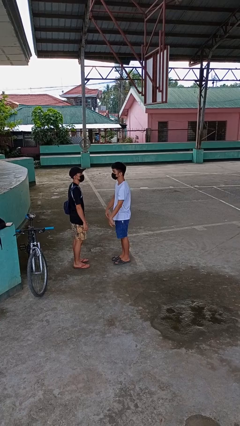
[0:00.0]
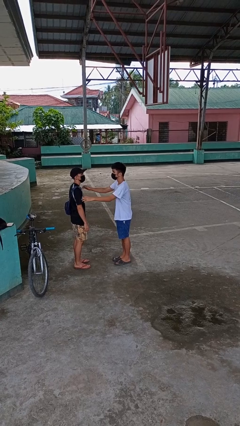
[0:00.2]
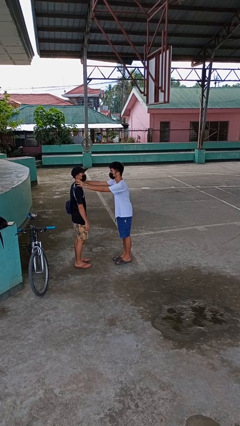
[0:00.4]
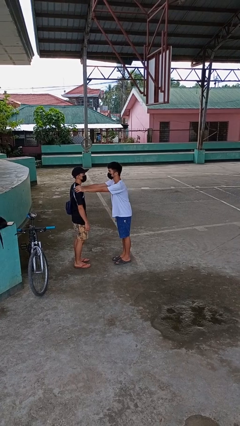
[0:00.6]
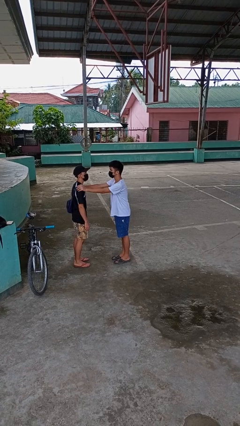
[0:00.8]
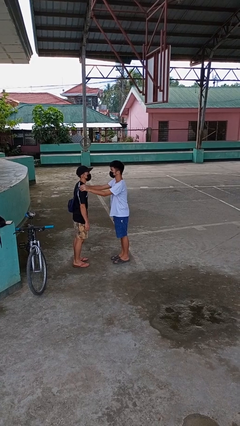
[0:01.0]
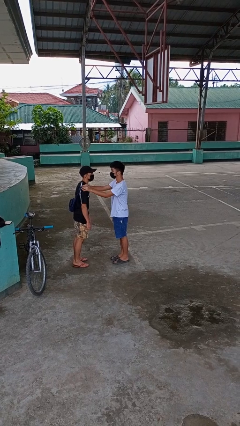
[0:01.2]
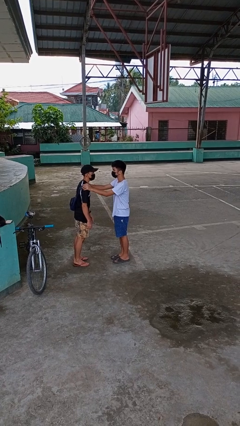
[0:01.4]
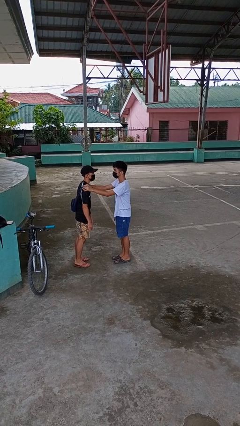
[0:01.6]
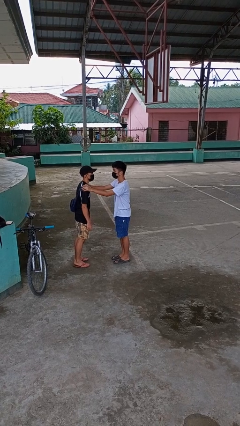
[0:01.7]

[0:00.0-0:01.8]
person grabs person by shoulder

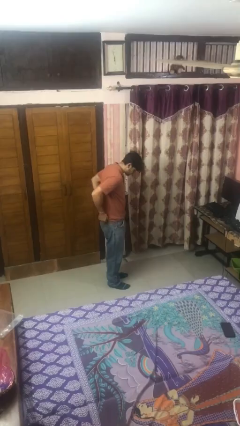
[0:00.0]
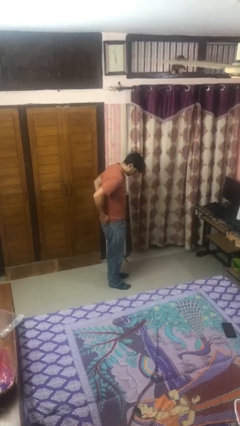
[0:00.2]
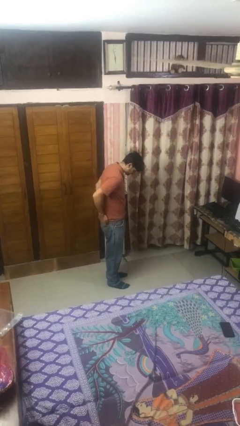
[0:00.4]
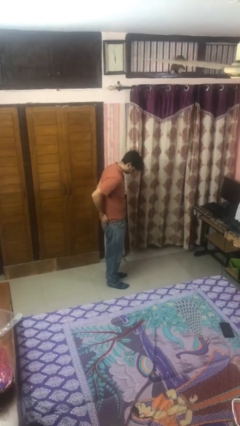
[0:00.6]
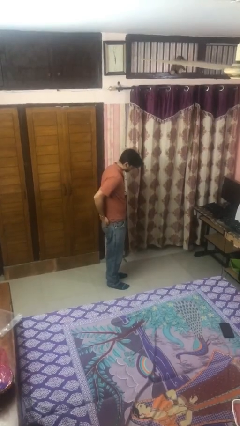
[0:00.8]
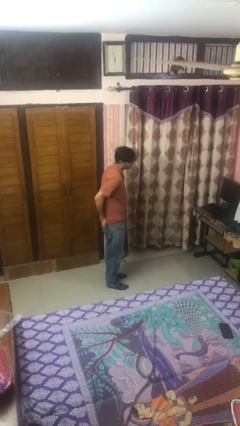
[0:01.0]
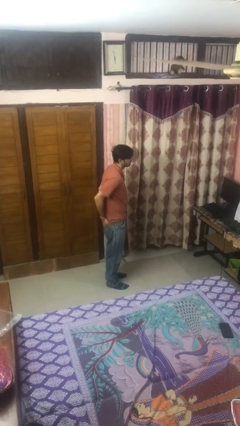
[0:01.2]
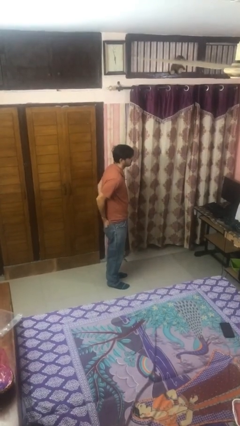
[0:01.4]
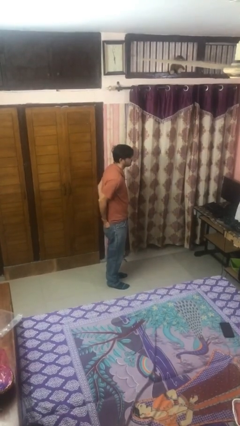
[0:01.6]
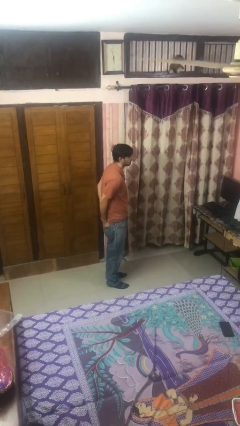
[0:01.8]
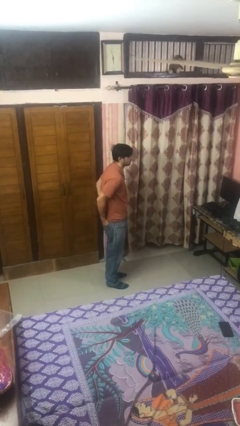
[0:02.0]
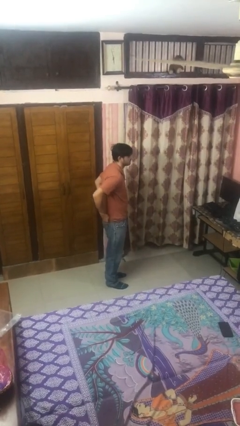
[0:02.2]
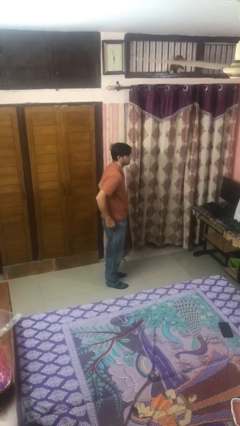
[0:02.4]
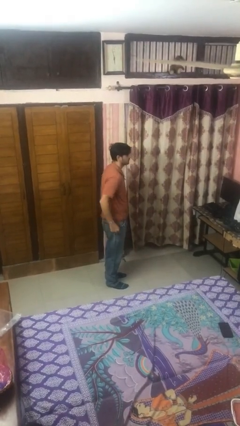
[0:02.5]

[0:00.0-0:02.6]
person puts hands in back pockets

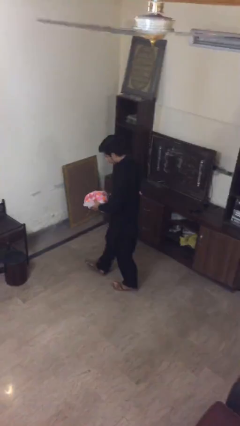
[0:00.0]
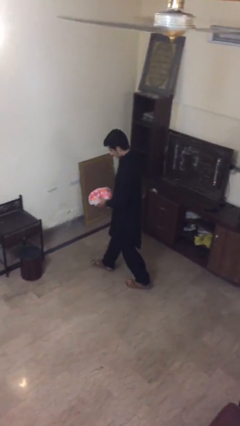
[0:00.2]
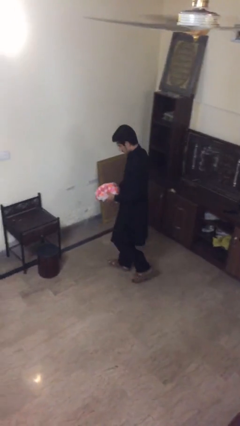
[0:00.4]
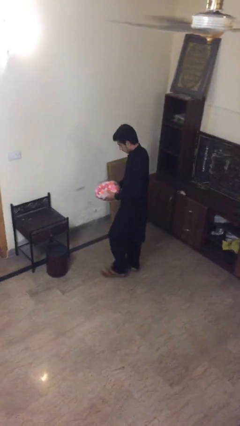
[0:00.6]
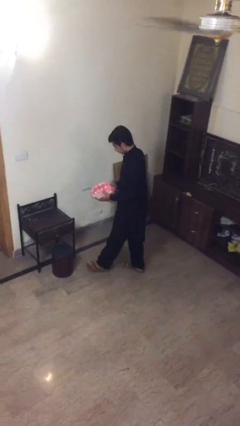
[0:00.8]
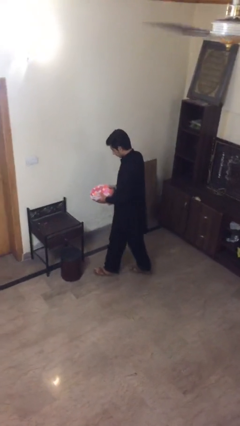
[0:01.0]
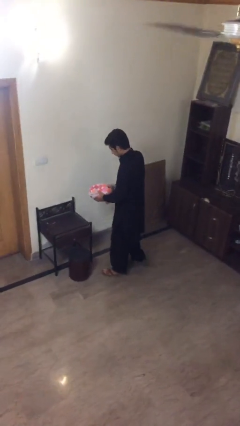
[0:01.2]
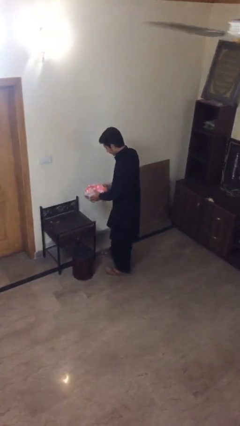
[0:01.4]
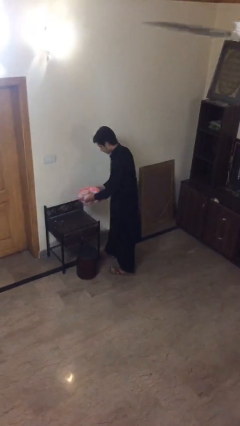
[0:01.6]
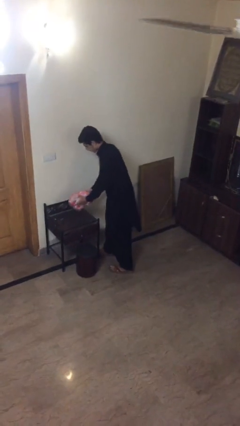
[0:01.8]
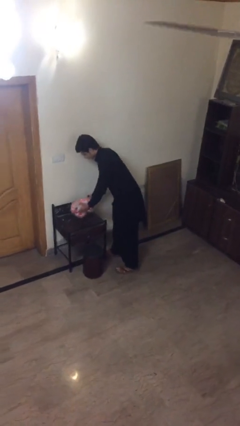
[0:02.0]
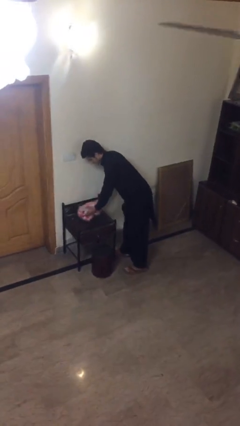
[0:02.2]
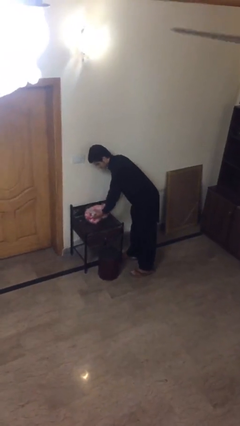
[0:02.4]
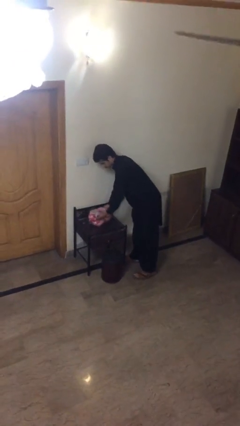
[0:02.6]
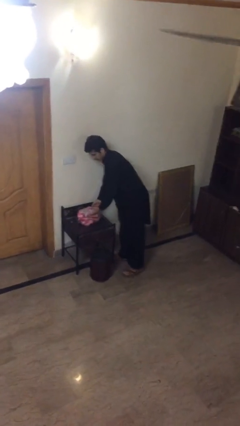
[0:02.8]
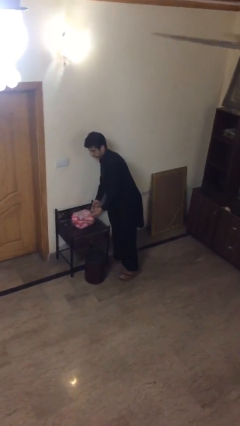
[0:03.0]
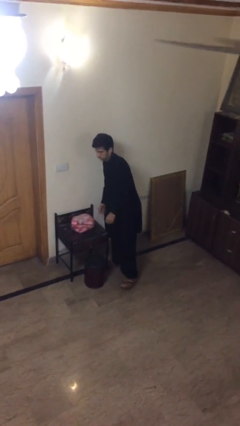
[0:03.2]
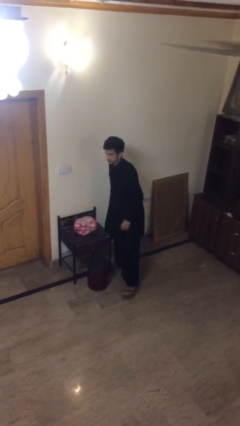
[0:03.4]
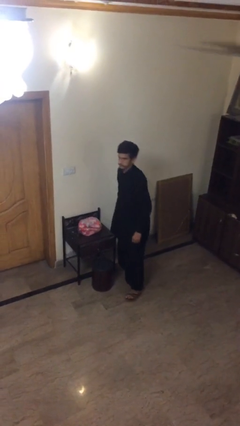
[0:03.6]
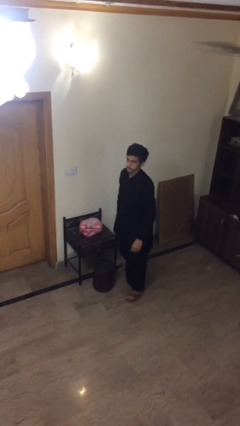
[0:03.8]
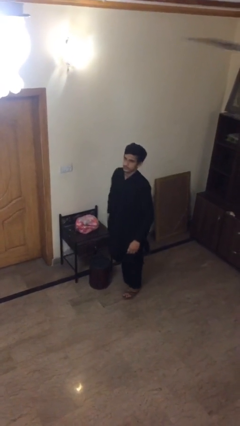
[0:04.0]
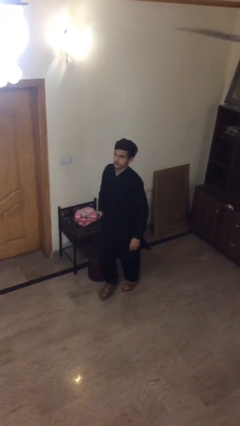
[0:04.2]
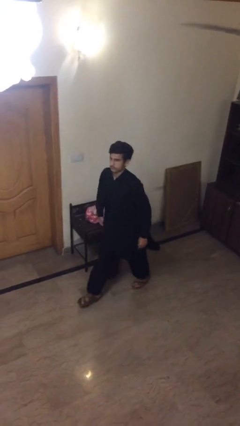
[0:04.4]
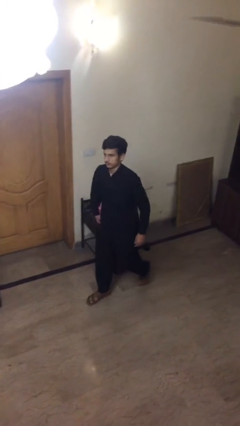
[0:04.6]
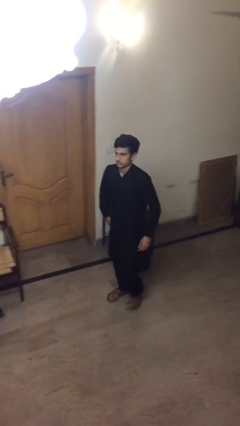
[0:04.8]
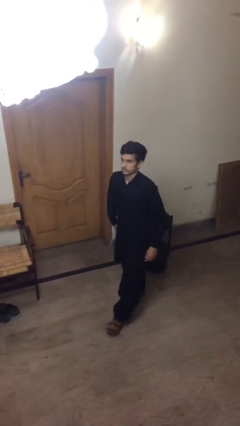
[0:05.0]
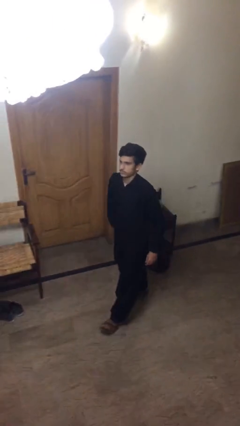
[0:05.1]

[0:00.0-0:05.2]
person puts down object on table

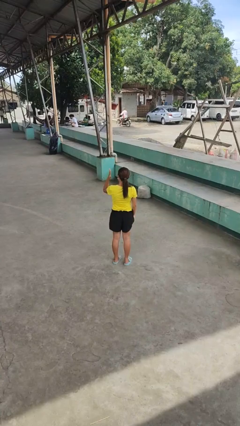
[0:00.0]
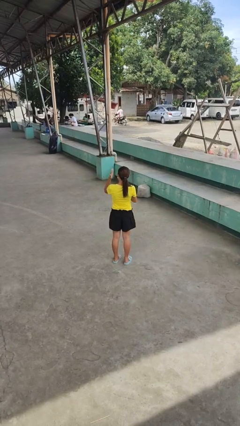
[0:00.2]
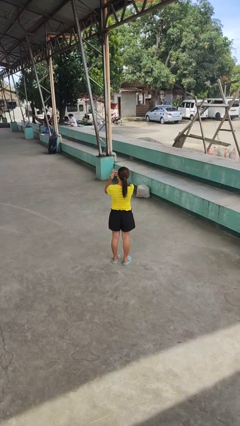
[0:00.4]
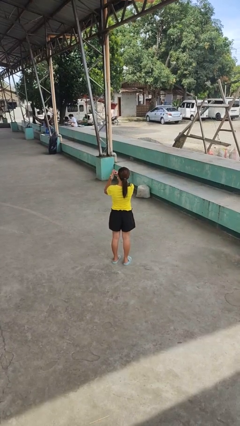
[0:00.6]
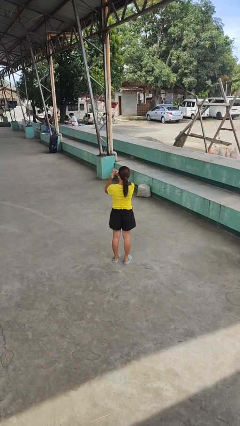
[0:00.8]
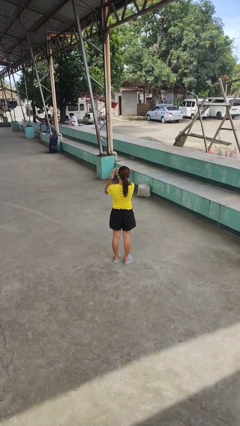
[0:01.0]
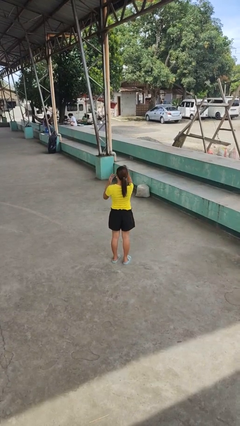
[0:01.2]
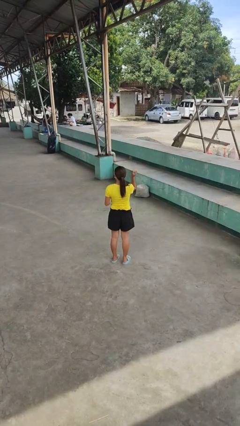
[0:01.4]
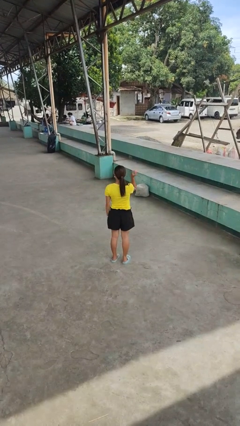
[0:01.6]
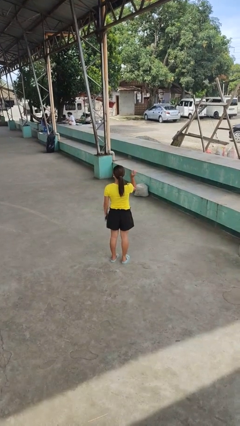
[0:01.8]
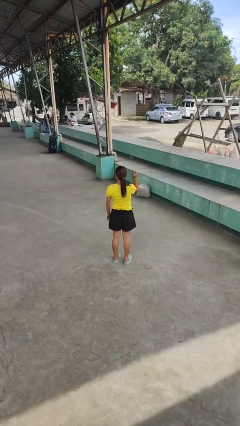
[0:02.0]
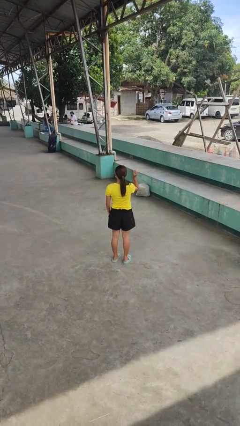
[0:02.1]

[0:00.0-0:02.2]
person takes off ring

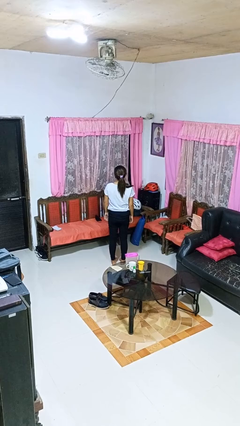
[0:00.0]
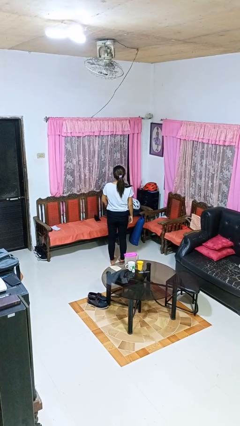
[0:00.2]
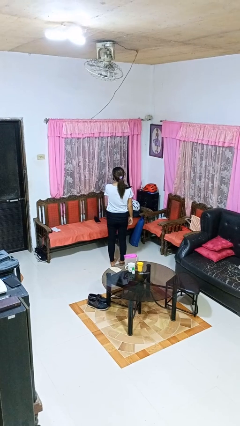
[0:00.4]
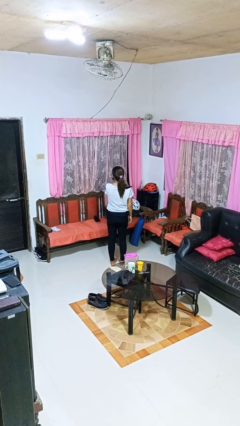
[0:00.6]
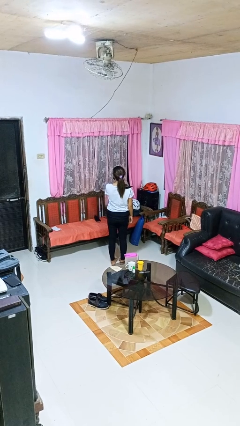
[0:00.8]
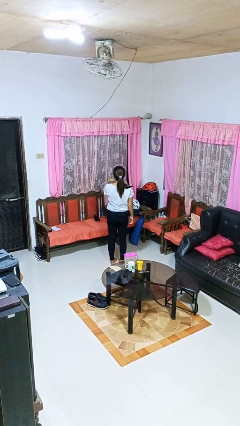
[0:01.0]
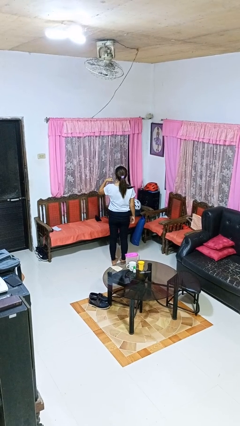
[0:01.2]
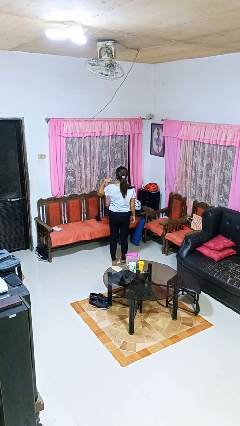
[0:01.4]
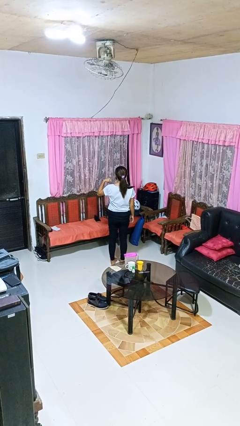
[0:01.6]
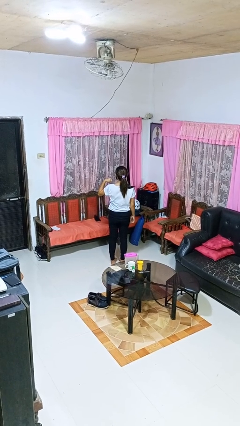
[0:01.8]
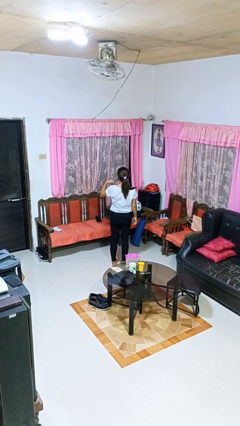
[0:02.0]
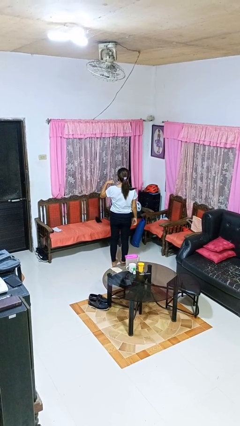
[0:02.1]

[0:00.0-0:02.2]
person gestures cut

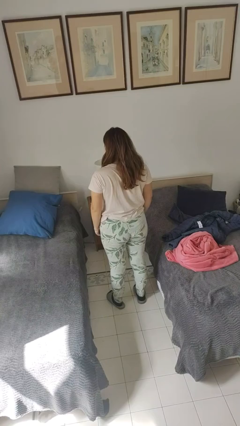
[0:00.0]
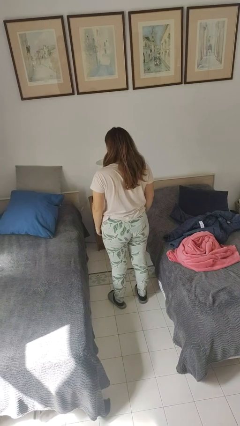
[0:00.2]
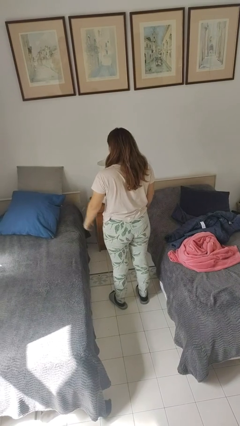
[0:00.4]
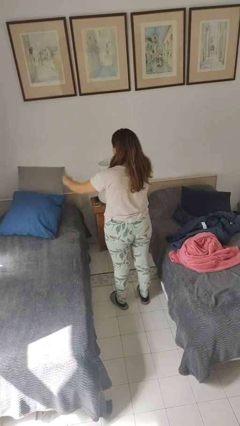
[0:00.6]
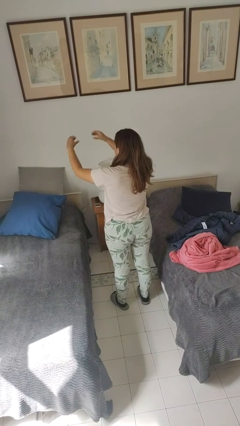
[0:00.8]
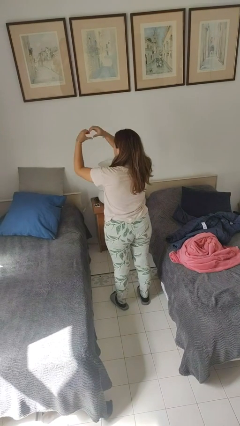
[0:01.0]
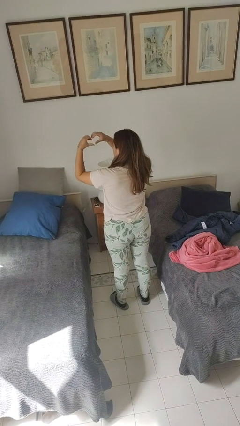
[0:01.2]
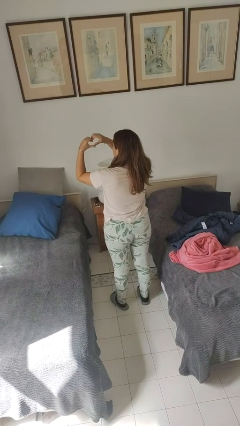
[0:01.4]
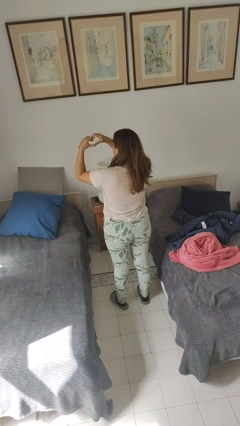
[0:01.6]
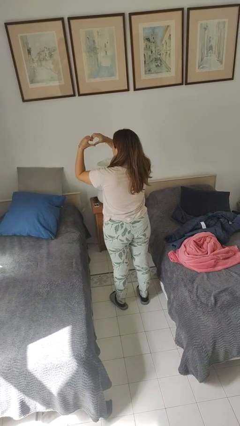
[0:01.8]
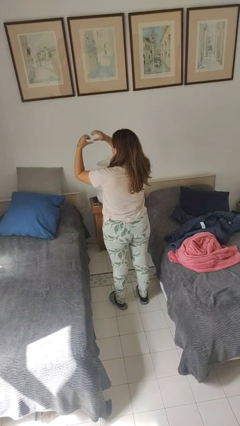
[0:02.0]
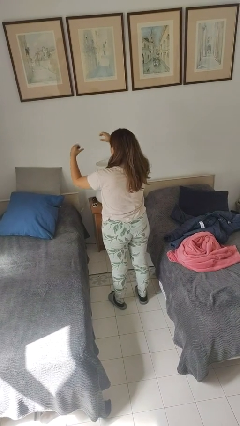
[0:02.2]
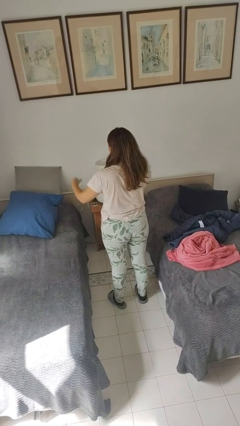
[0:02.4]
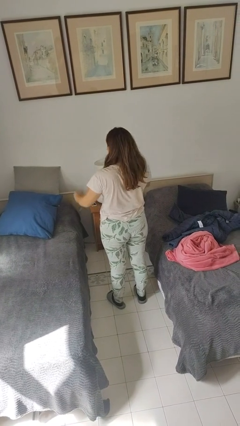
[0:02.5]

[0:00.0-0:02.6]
person gestures heart

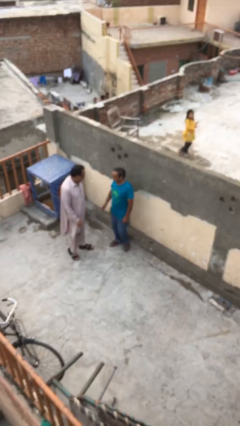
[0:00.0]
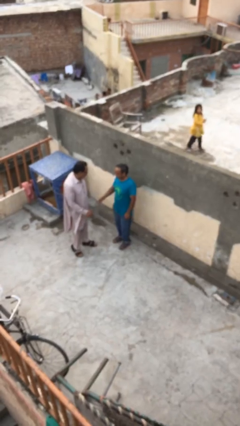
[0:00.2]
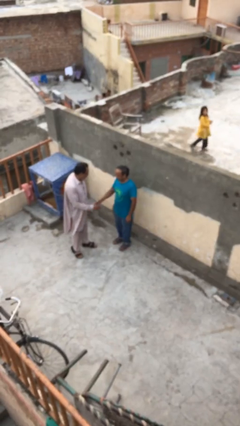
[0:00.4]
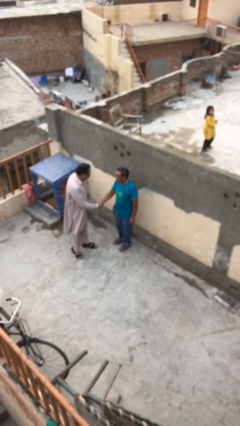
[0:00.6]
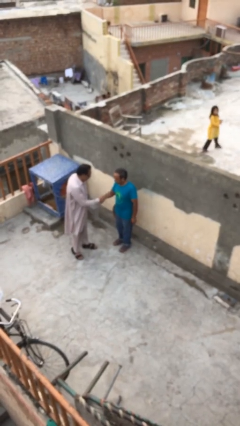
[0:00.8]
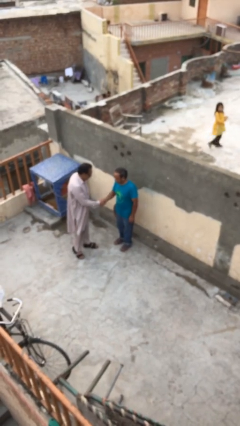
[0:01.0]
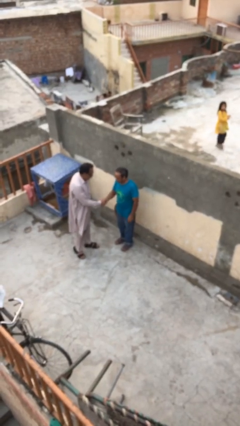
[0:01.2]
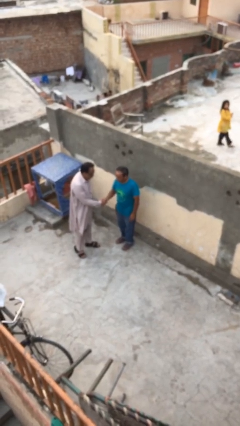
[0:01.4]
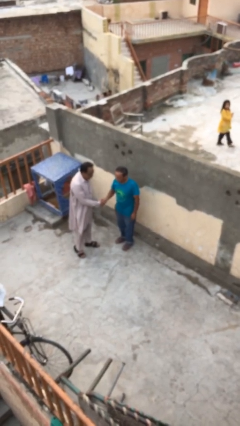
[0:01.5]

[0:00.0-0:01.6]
person shakes hand
